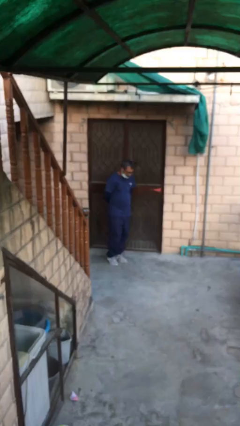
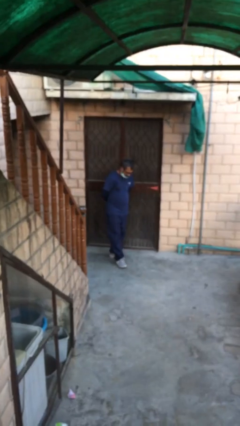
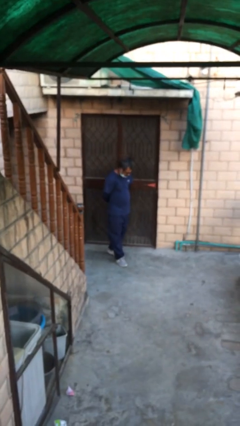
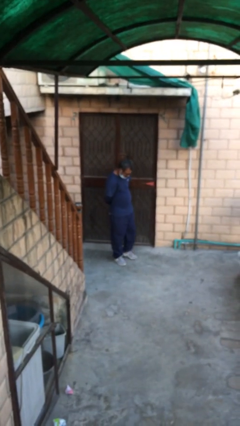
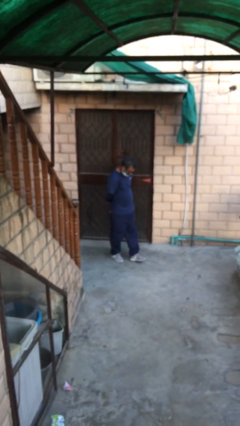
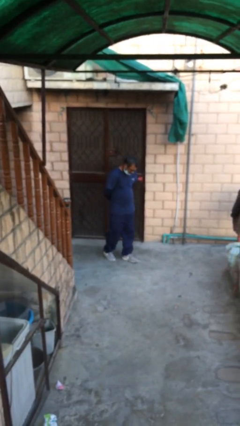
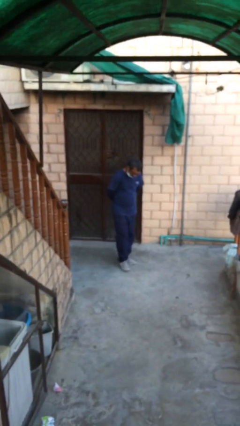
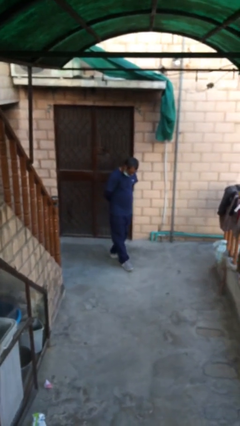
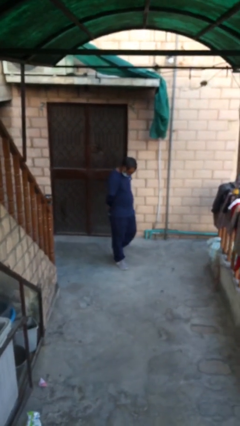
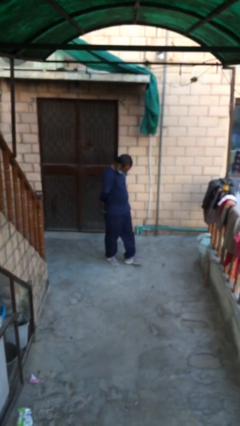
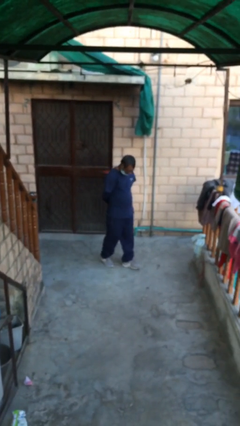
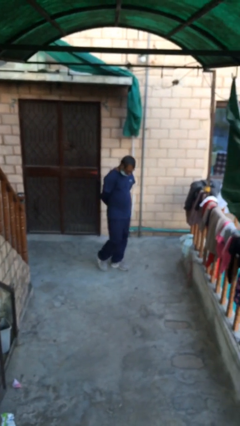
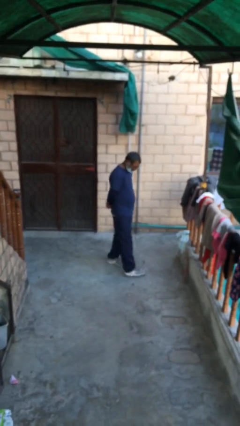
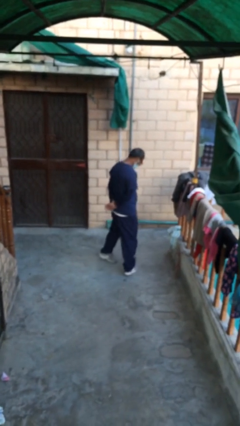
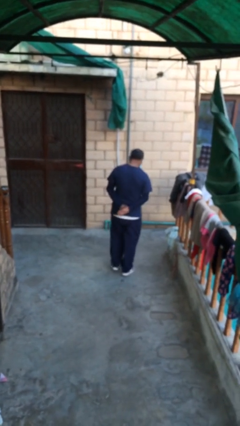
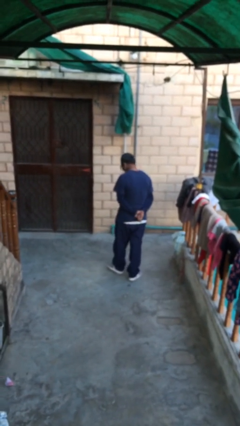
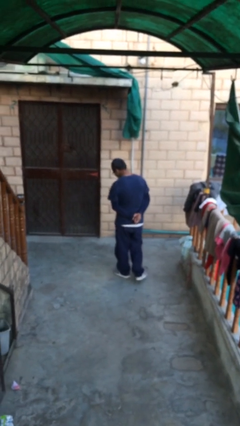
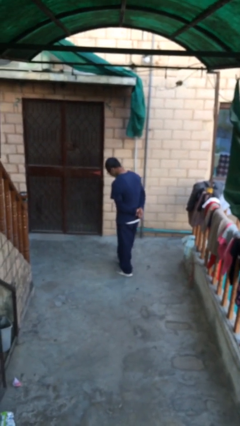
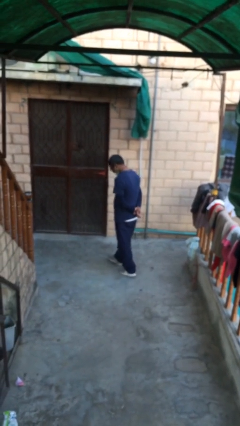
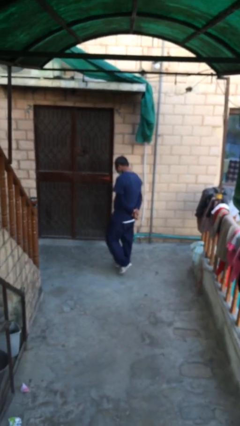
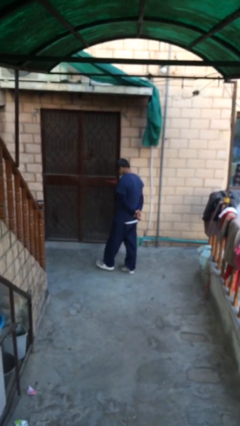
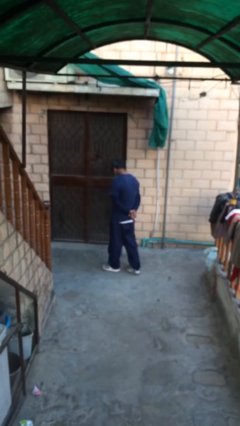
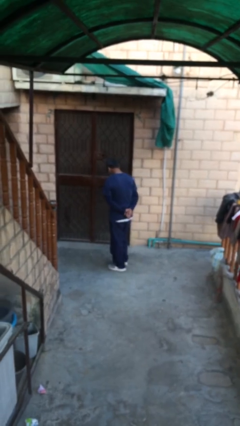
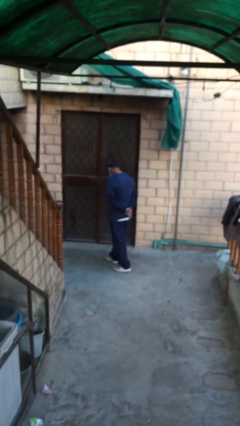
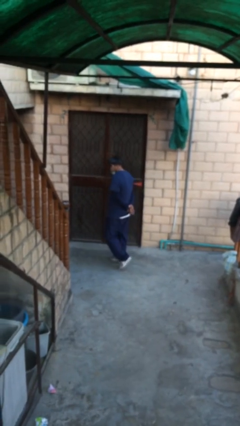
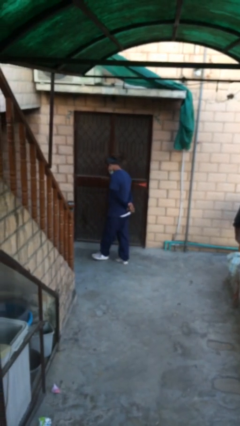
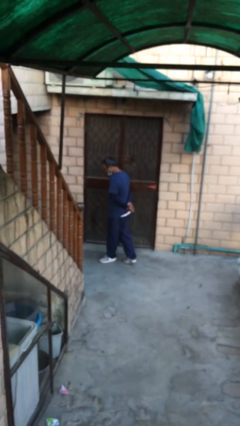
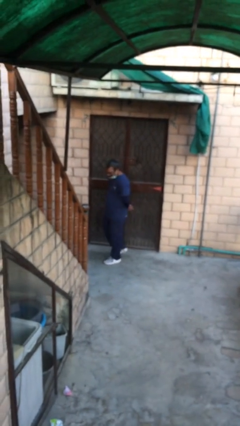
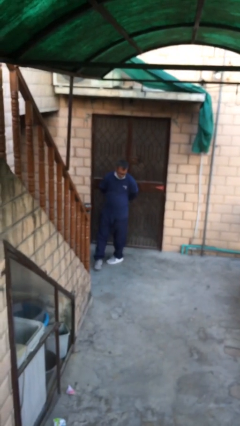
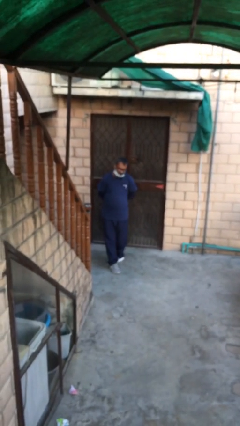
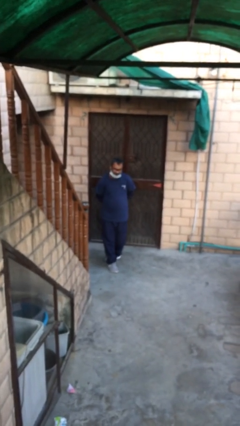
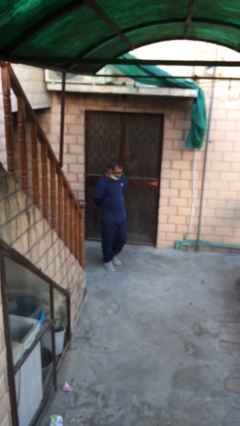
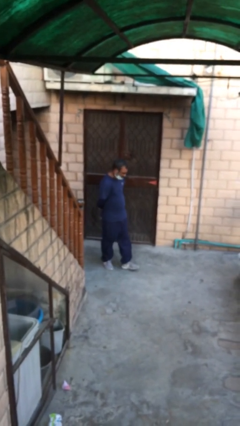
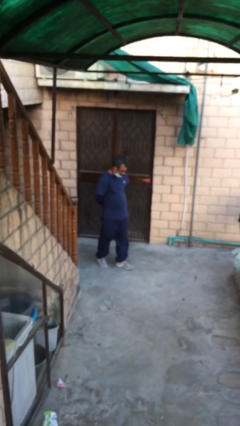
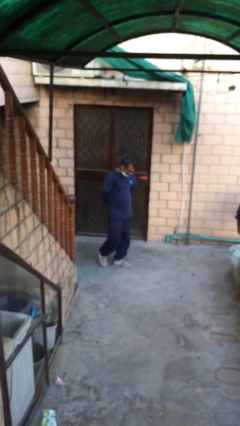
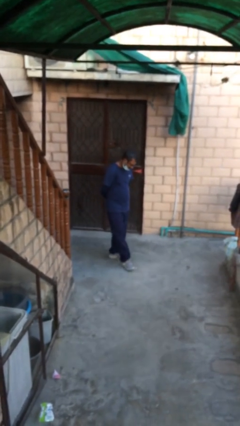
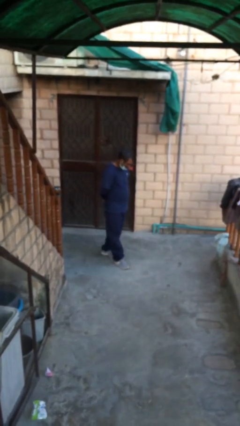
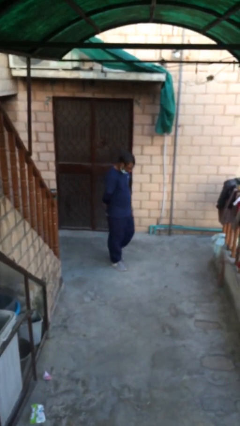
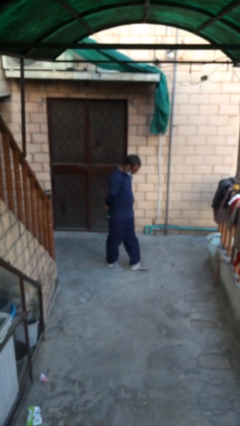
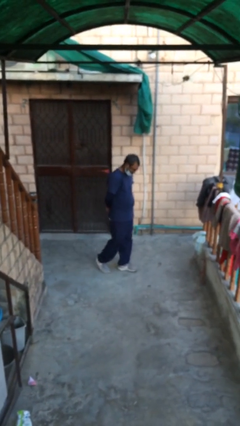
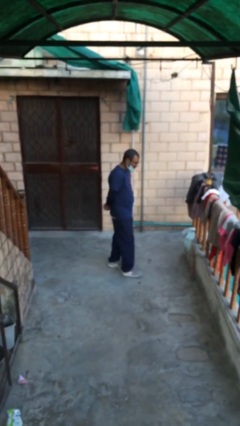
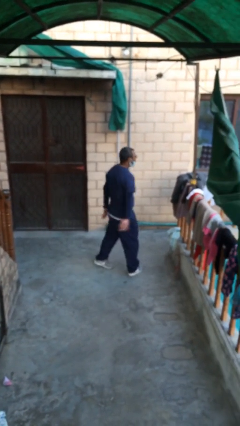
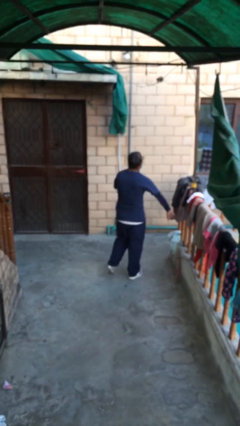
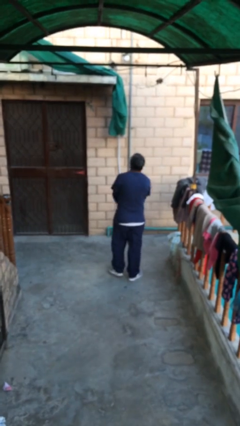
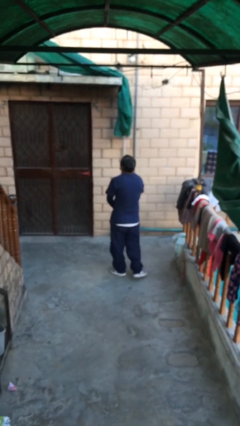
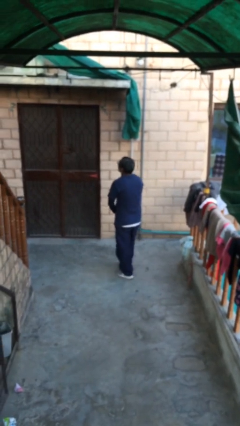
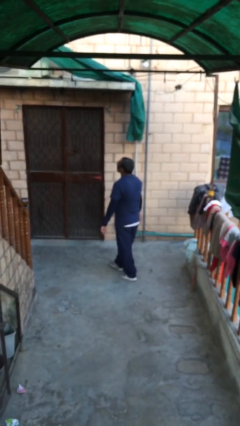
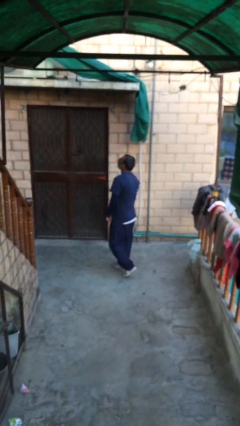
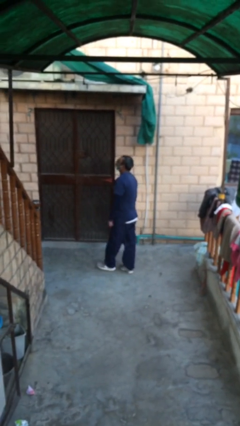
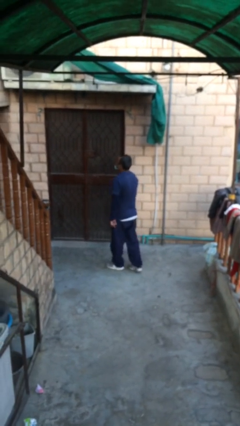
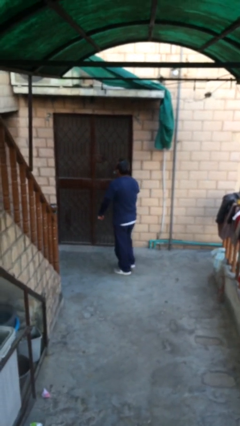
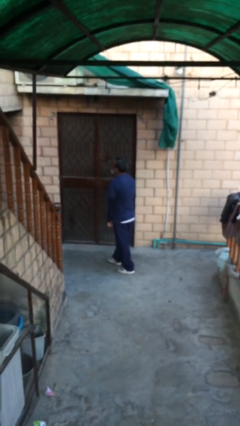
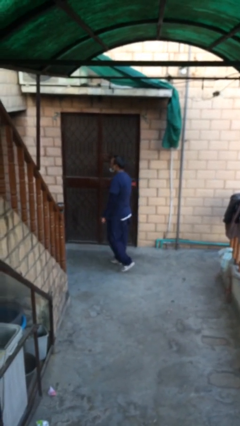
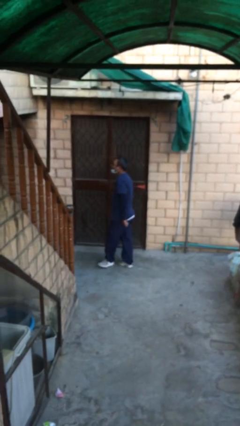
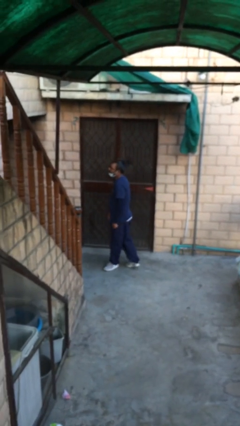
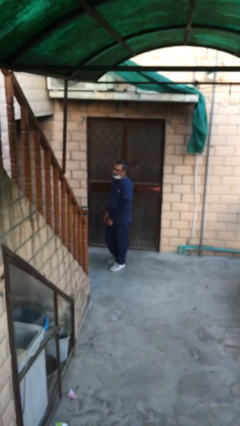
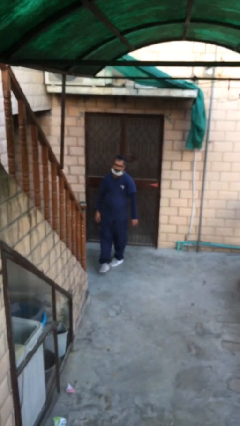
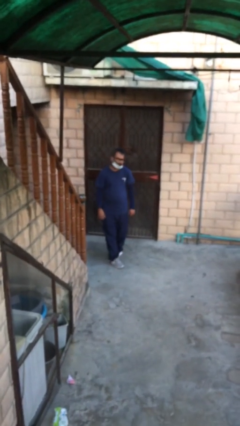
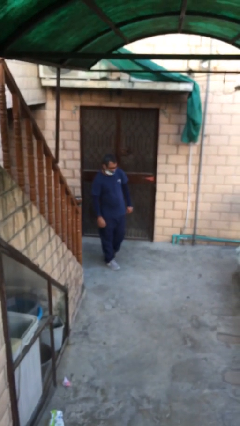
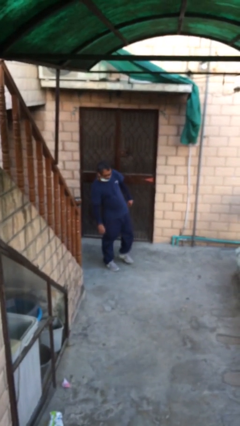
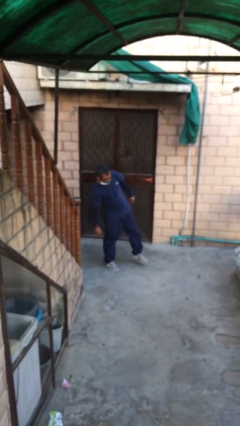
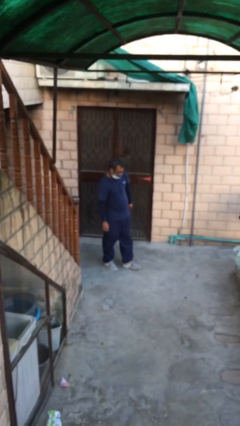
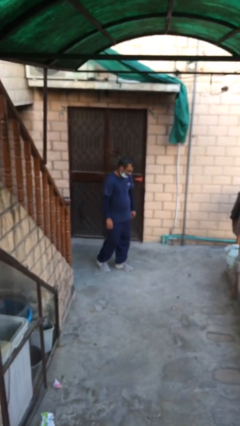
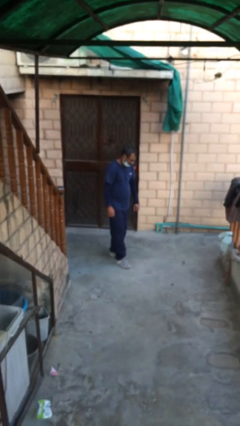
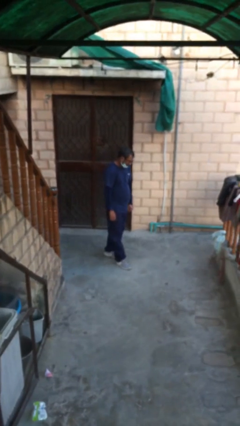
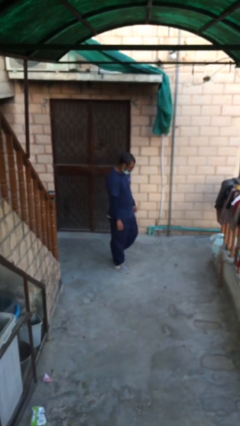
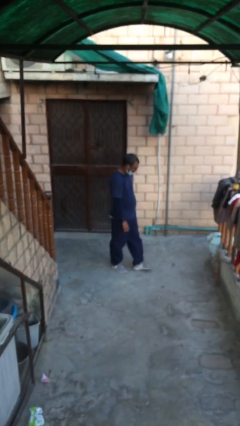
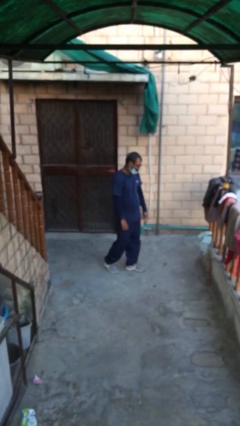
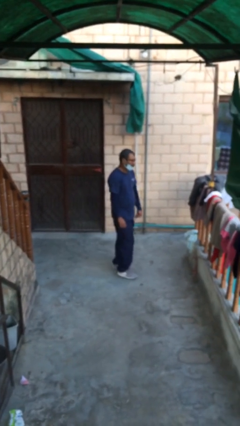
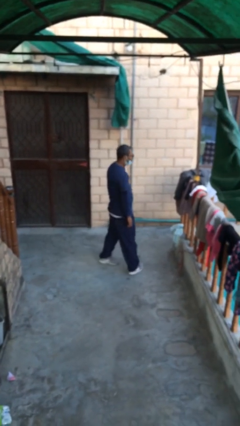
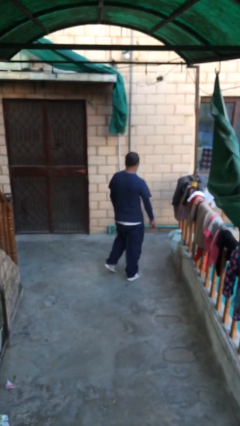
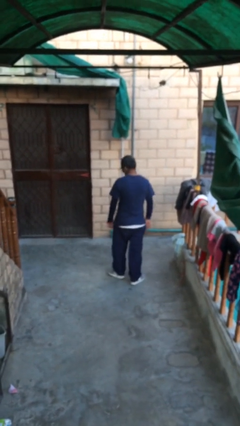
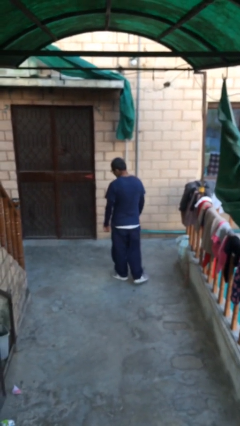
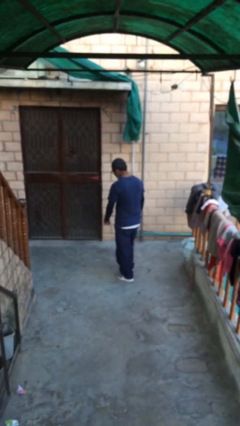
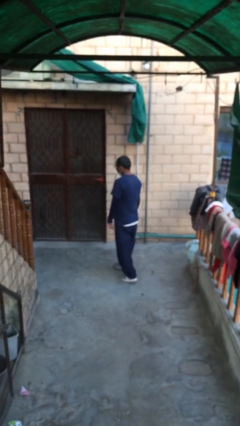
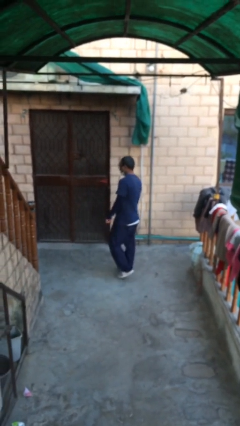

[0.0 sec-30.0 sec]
person walks

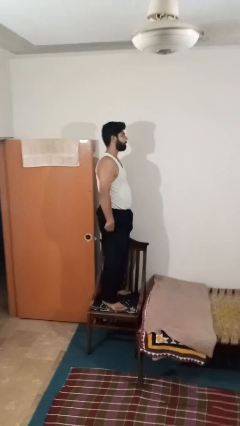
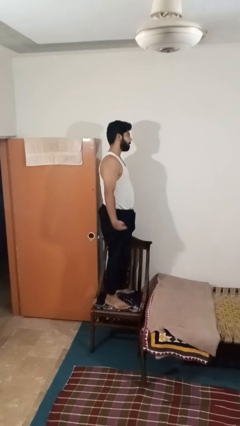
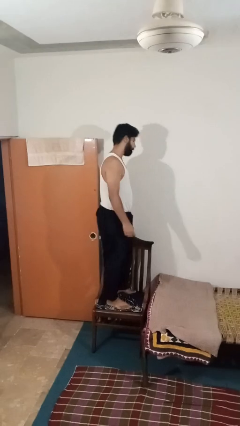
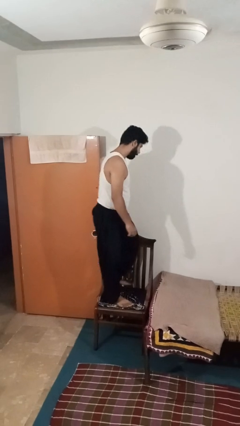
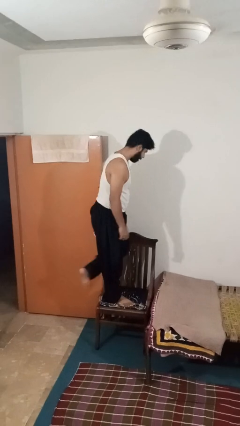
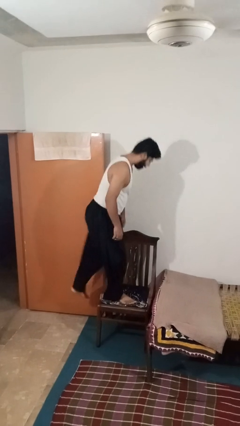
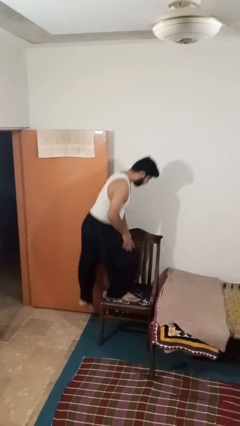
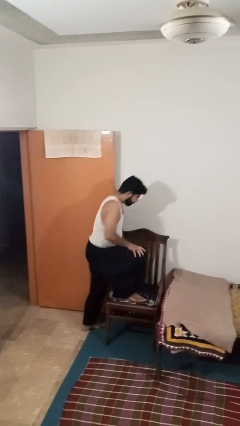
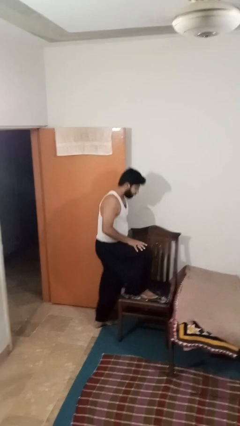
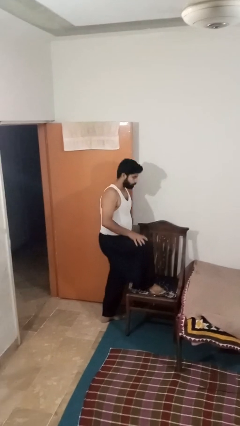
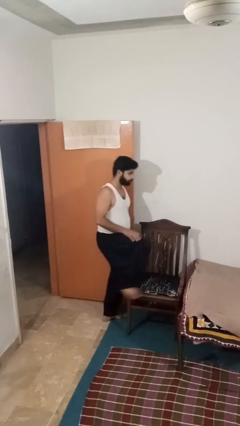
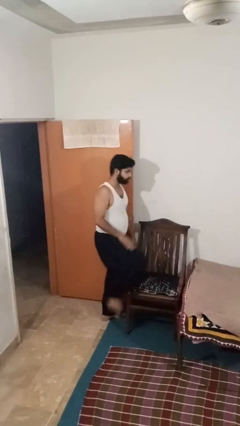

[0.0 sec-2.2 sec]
person climbs off chair

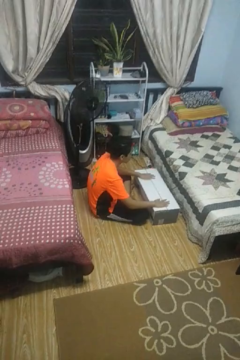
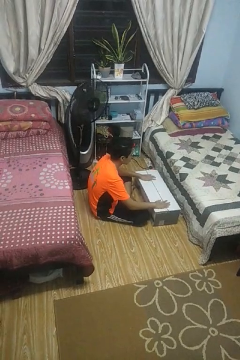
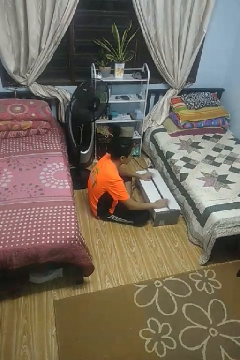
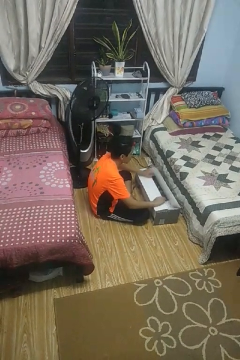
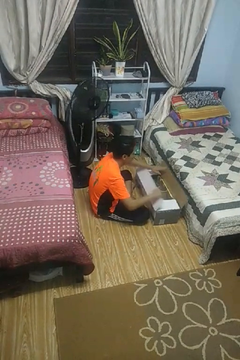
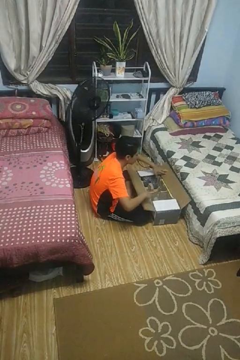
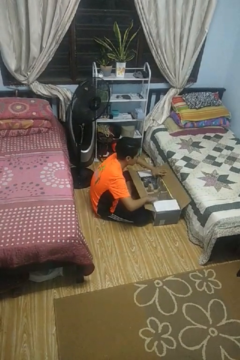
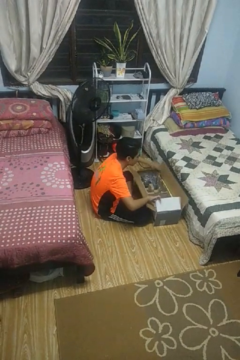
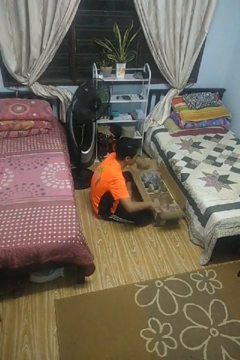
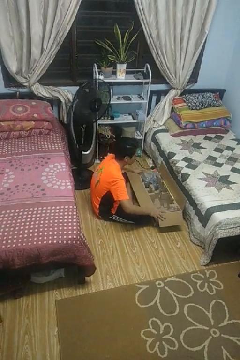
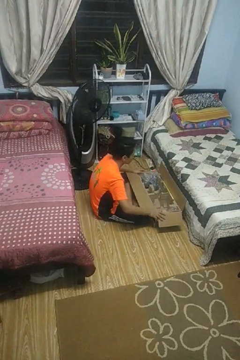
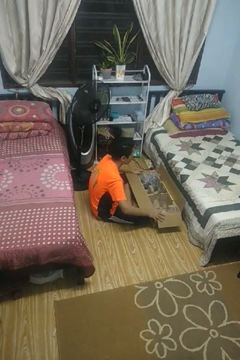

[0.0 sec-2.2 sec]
person opens box
